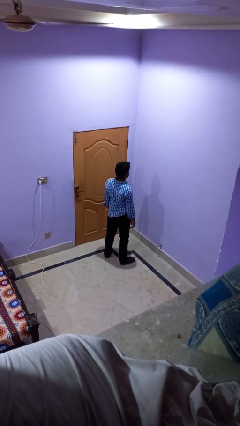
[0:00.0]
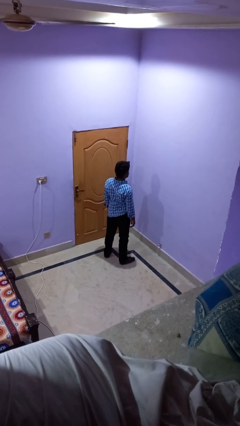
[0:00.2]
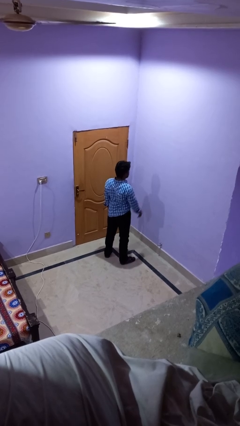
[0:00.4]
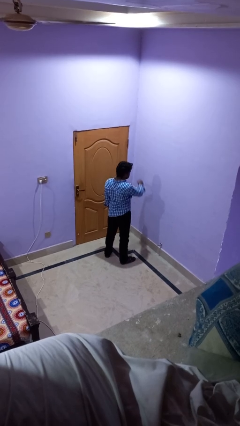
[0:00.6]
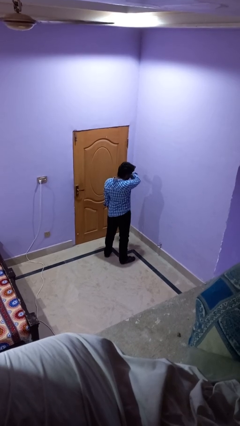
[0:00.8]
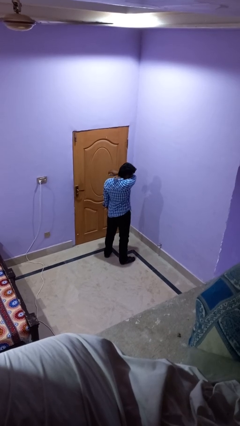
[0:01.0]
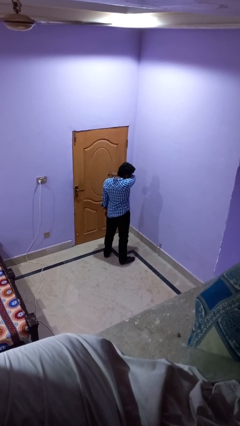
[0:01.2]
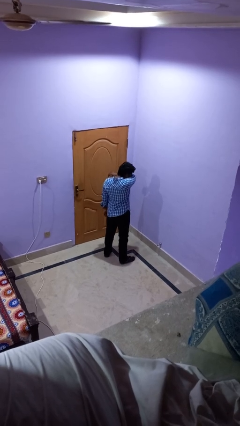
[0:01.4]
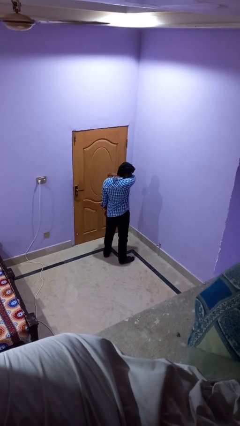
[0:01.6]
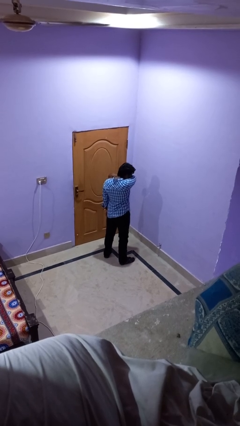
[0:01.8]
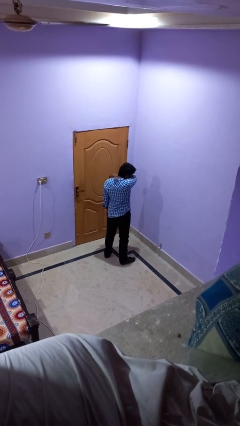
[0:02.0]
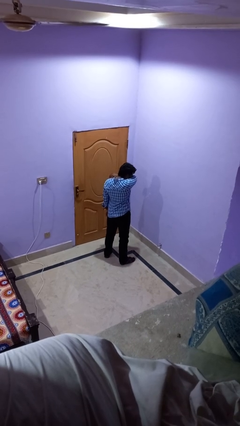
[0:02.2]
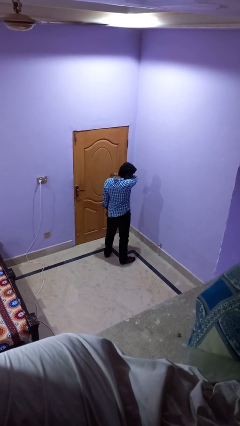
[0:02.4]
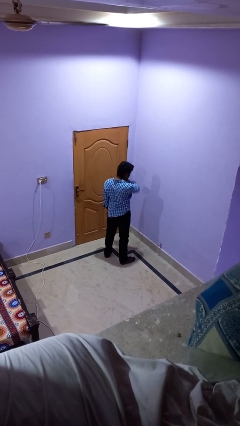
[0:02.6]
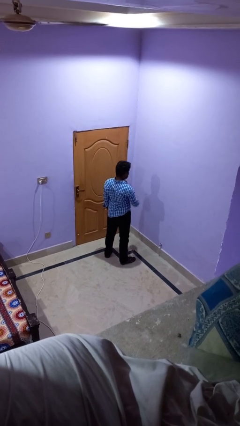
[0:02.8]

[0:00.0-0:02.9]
person sneezes into arm

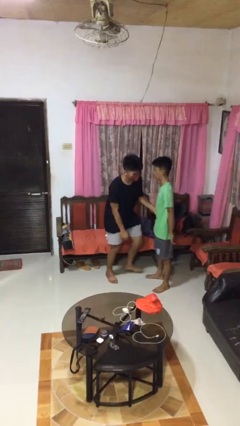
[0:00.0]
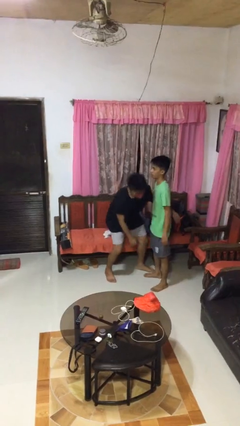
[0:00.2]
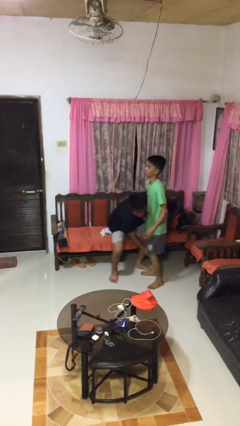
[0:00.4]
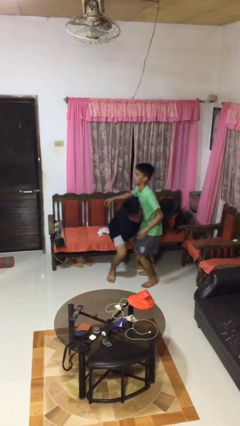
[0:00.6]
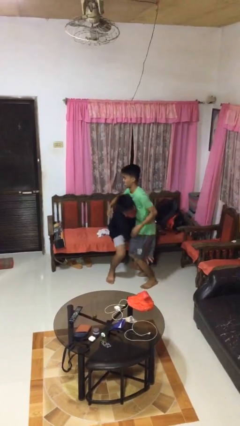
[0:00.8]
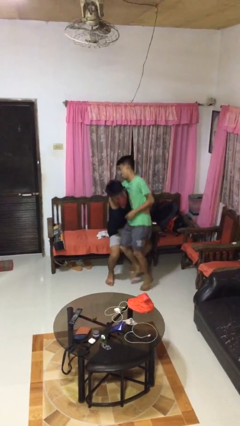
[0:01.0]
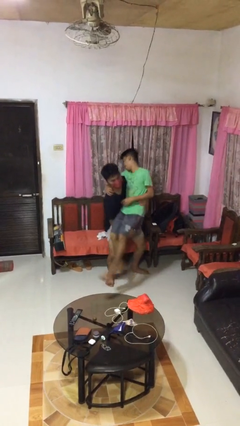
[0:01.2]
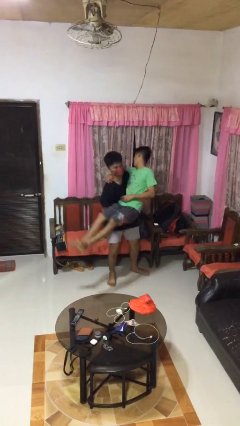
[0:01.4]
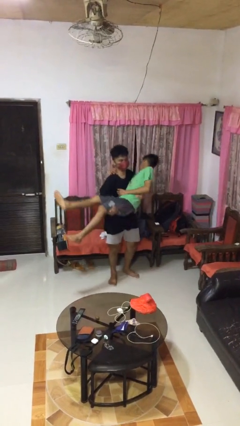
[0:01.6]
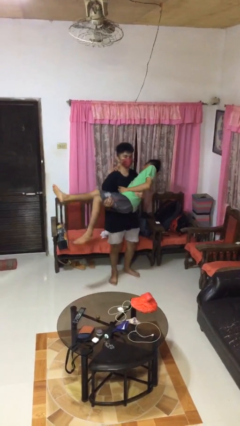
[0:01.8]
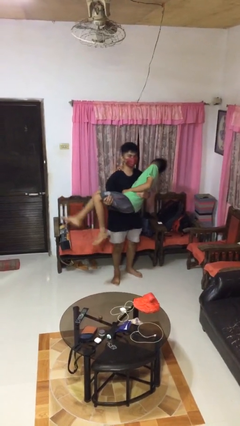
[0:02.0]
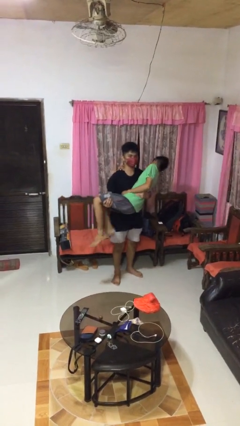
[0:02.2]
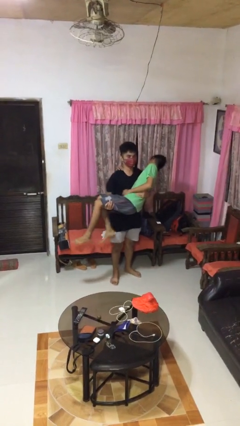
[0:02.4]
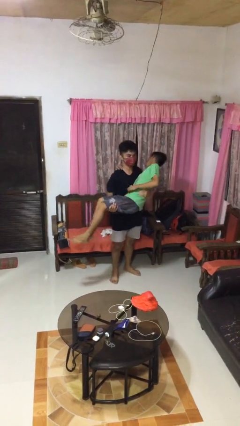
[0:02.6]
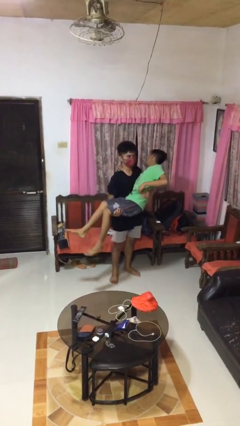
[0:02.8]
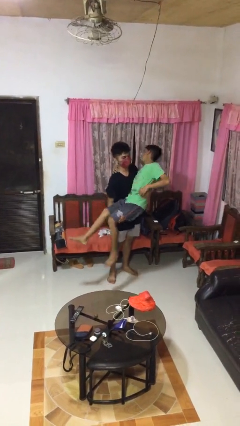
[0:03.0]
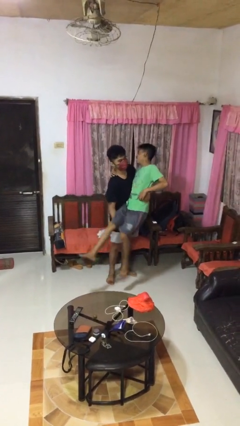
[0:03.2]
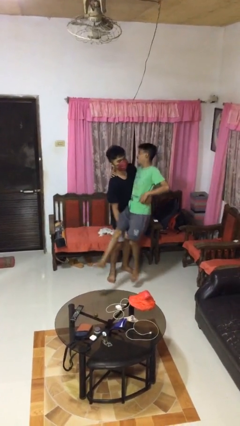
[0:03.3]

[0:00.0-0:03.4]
person picks up person

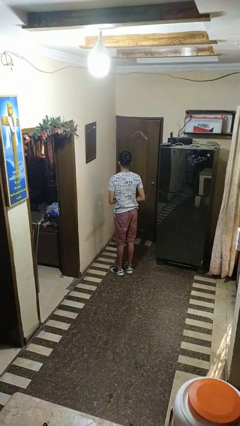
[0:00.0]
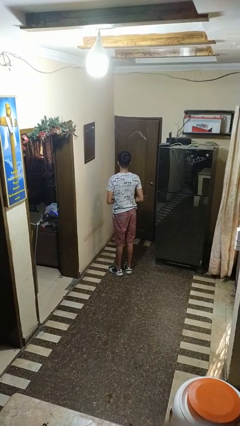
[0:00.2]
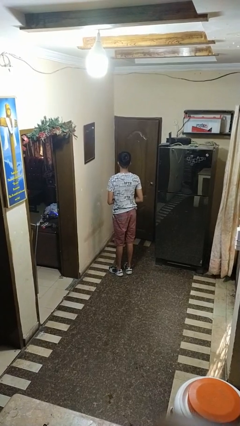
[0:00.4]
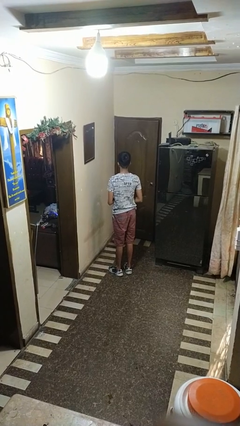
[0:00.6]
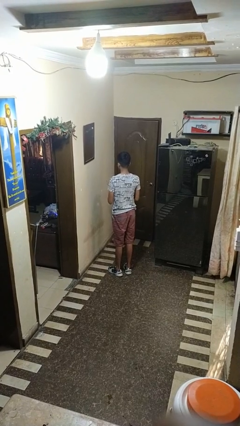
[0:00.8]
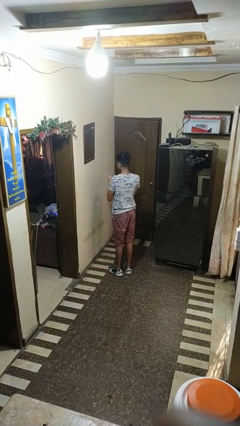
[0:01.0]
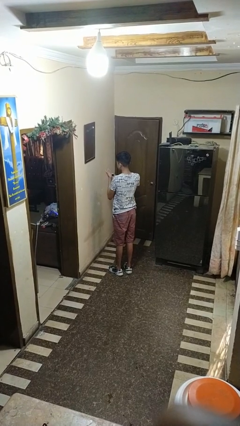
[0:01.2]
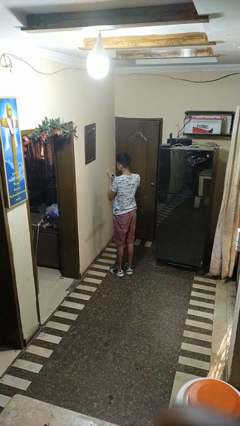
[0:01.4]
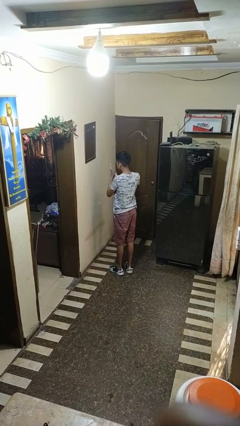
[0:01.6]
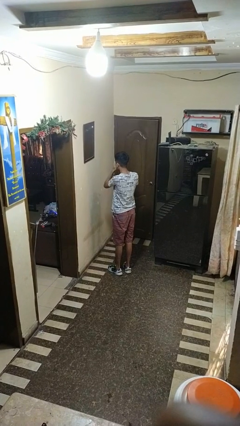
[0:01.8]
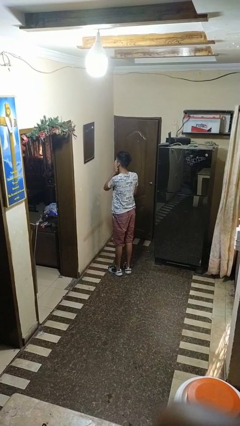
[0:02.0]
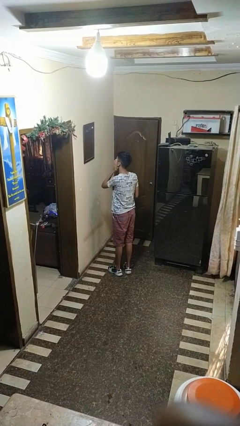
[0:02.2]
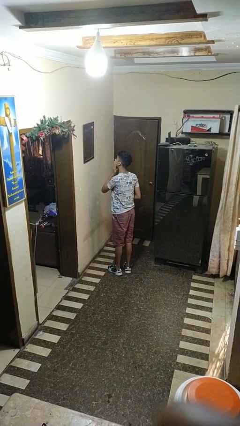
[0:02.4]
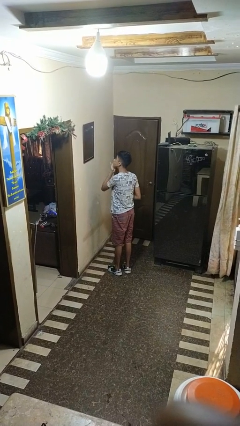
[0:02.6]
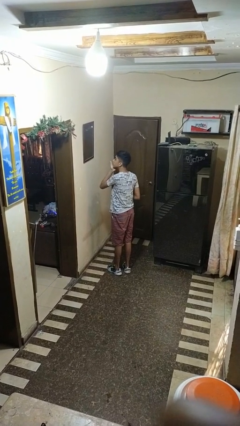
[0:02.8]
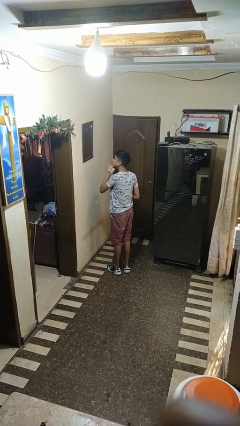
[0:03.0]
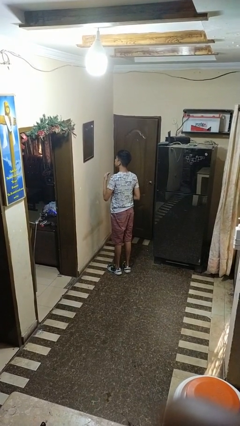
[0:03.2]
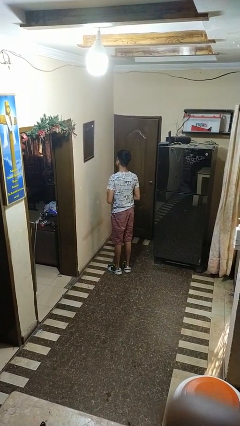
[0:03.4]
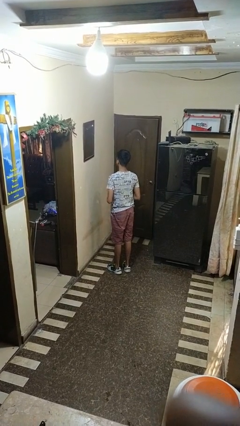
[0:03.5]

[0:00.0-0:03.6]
person applies foundation makeup

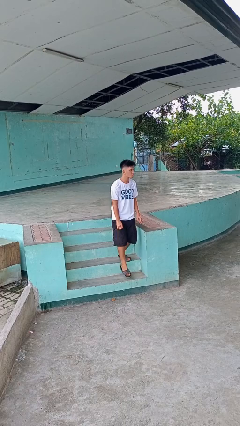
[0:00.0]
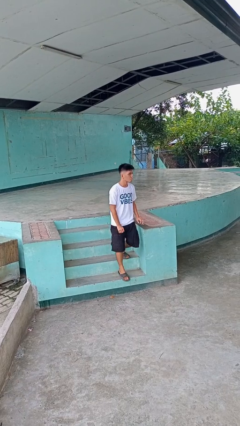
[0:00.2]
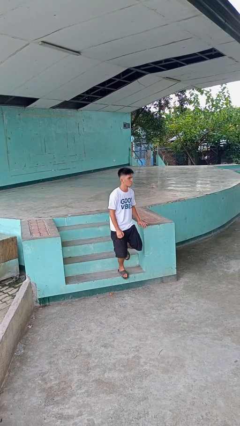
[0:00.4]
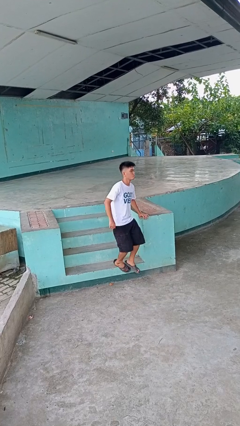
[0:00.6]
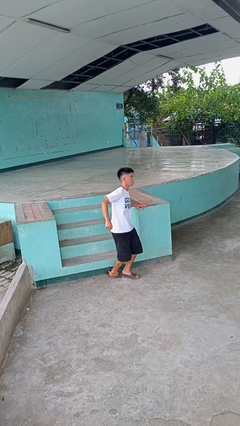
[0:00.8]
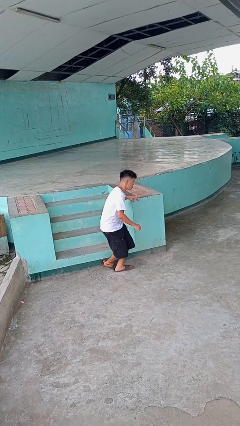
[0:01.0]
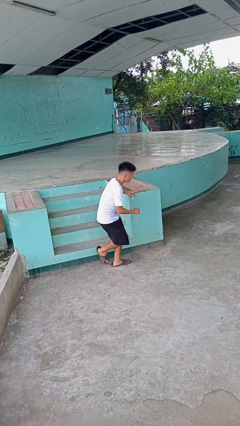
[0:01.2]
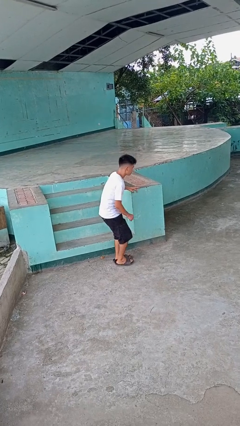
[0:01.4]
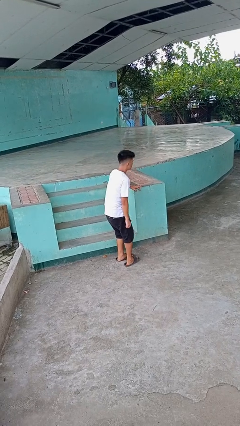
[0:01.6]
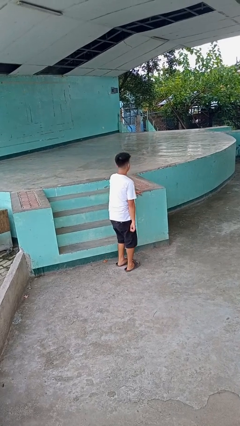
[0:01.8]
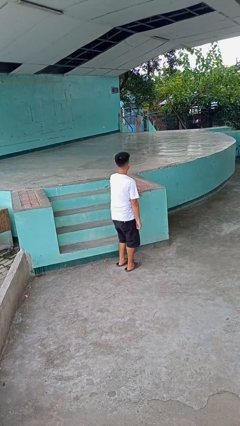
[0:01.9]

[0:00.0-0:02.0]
person trips on stair

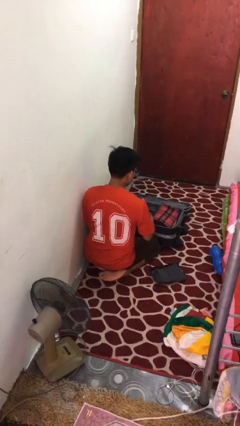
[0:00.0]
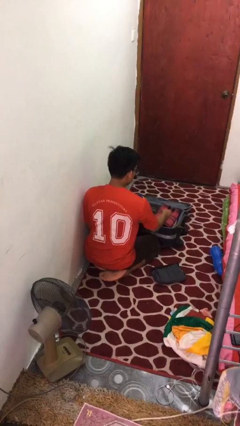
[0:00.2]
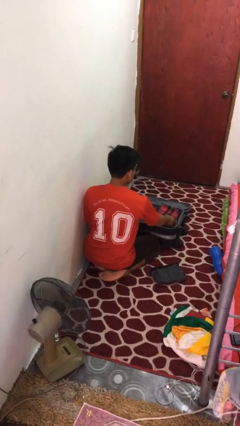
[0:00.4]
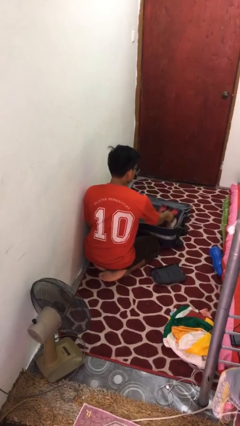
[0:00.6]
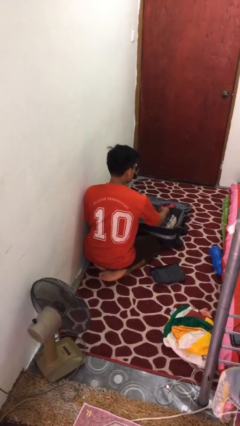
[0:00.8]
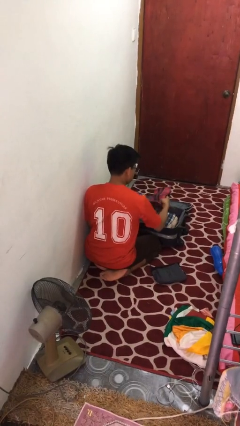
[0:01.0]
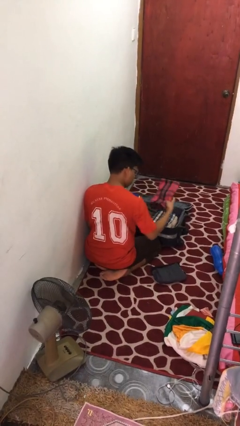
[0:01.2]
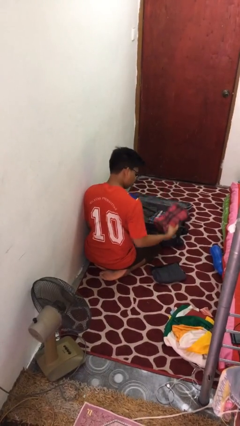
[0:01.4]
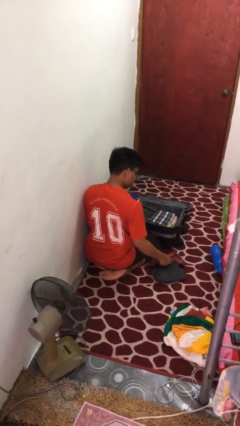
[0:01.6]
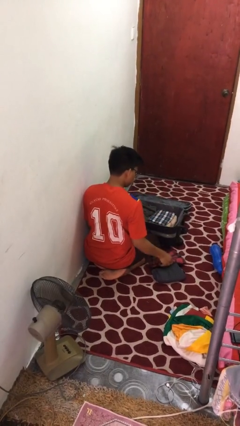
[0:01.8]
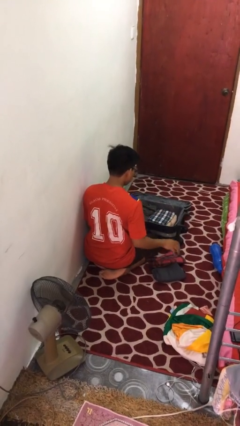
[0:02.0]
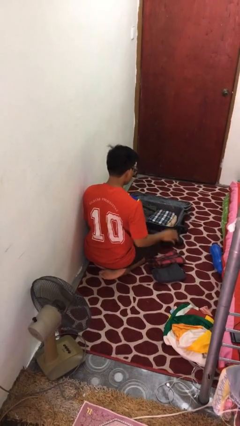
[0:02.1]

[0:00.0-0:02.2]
person unloads clothes from suitcase

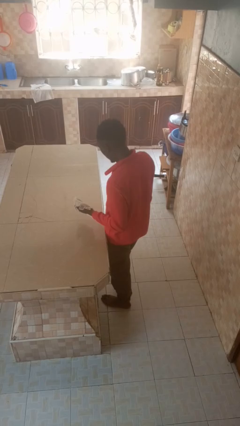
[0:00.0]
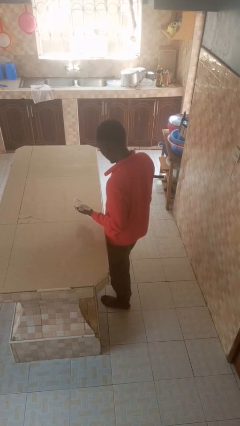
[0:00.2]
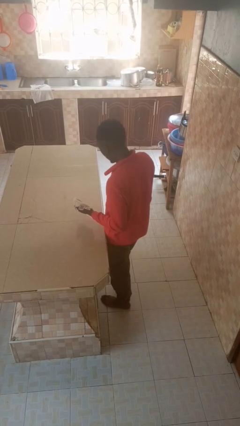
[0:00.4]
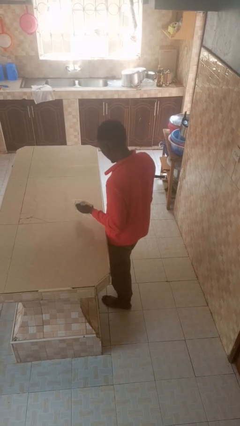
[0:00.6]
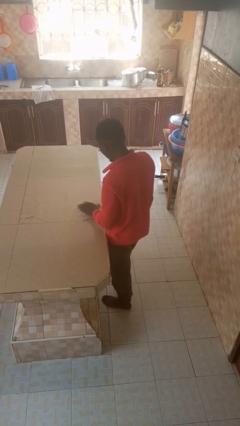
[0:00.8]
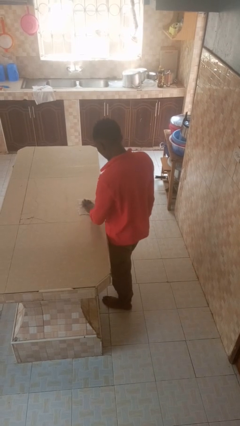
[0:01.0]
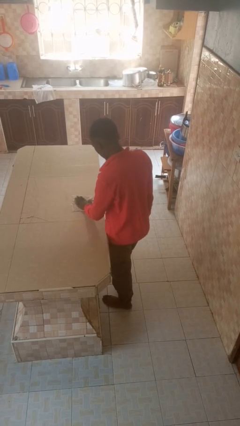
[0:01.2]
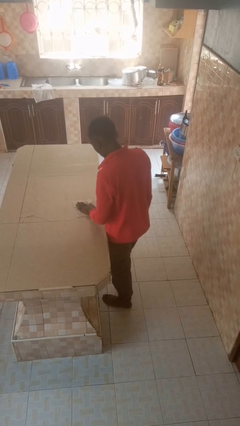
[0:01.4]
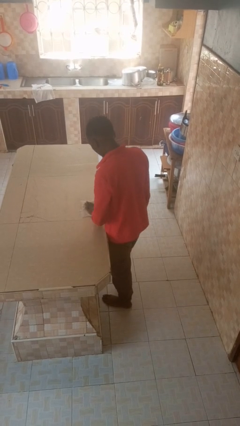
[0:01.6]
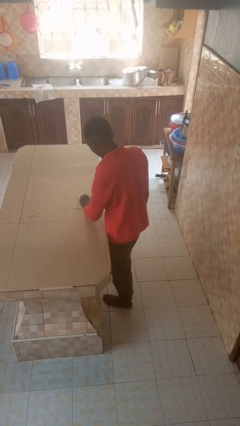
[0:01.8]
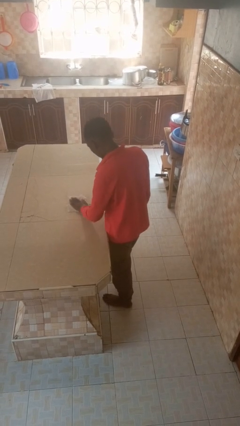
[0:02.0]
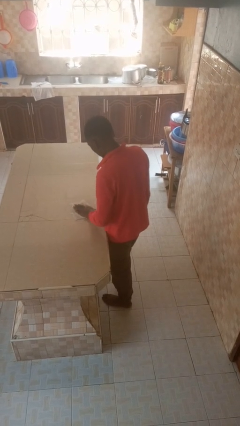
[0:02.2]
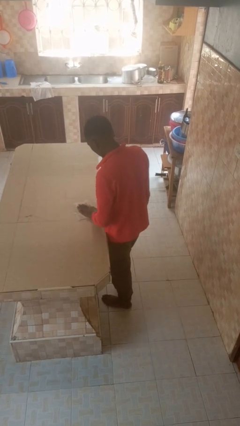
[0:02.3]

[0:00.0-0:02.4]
person cleans table with rag

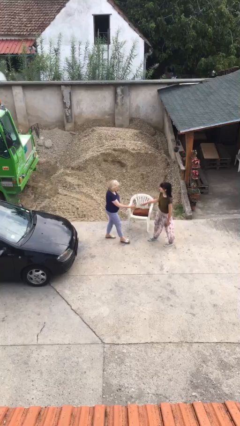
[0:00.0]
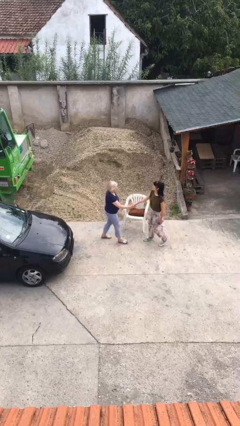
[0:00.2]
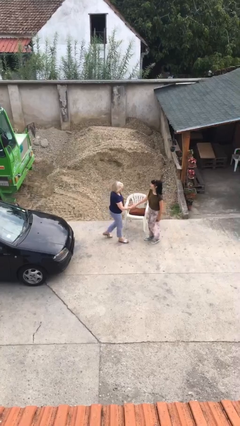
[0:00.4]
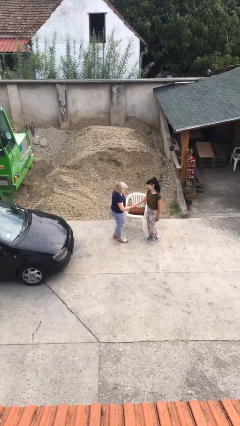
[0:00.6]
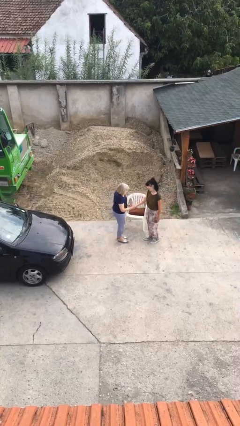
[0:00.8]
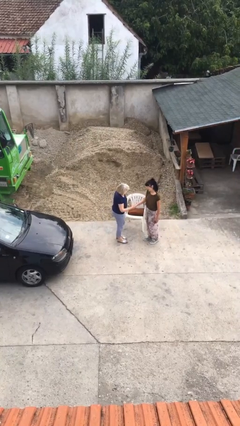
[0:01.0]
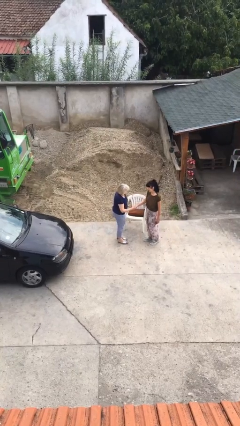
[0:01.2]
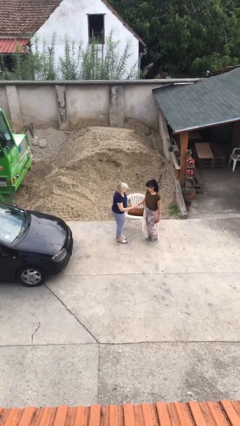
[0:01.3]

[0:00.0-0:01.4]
person shakes hand
